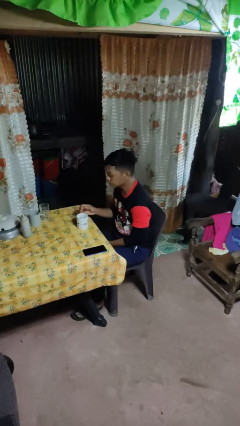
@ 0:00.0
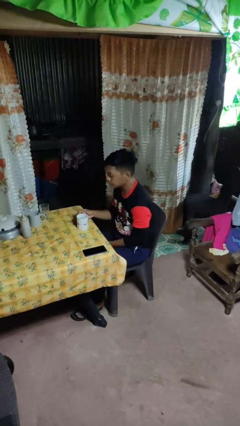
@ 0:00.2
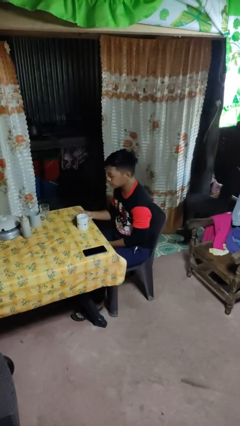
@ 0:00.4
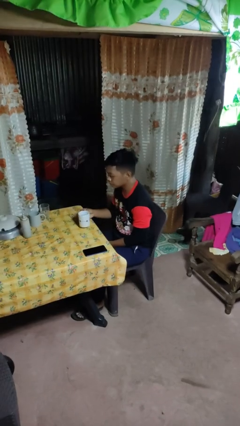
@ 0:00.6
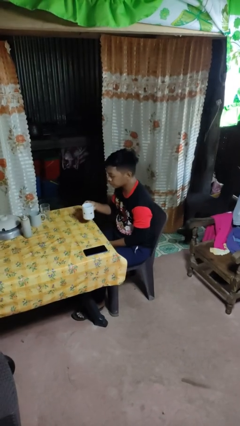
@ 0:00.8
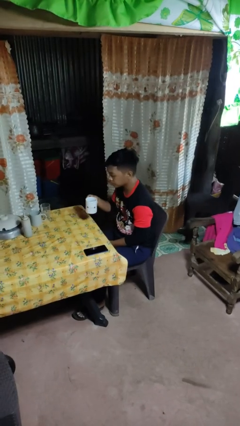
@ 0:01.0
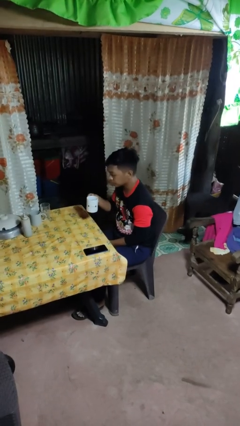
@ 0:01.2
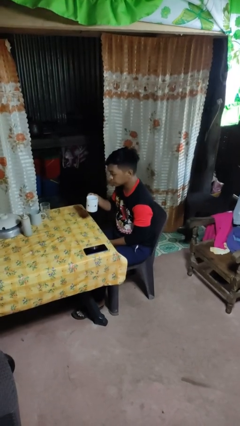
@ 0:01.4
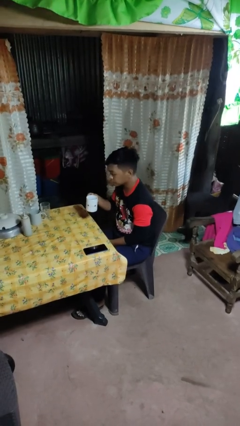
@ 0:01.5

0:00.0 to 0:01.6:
person picks up object from table

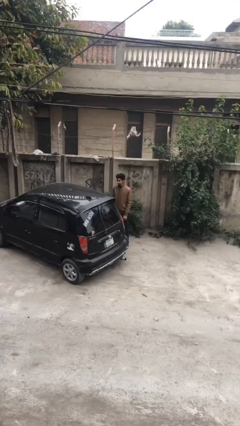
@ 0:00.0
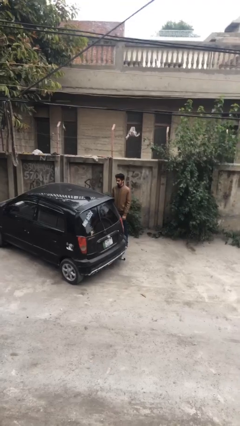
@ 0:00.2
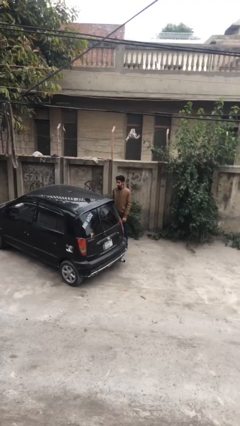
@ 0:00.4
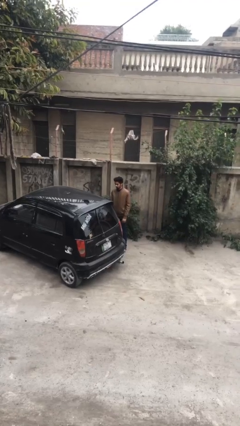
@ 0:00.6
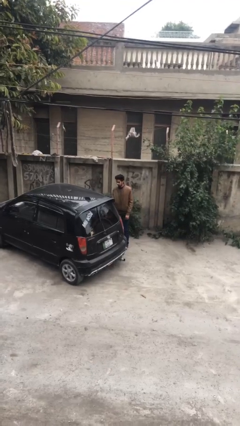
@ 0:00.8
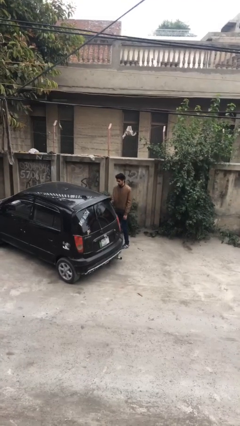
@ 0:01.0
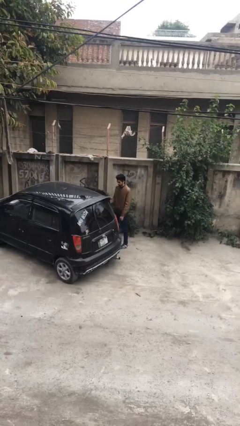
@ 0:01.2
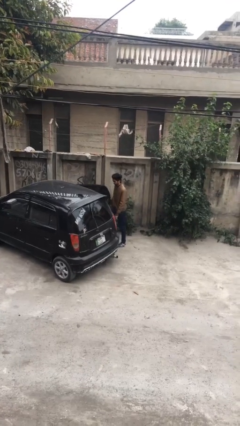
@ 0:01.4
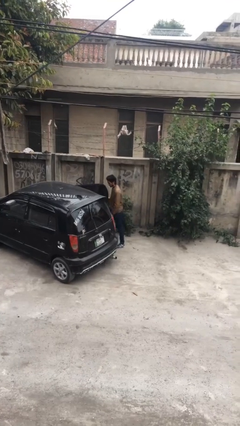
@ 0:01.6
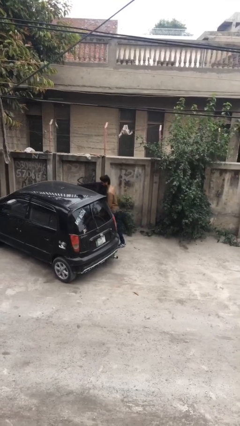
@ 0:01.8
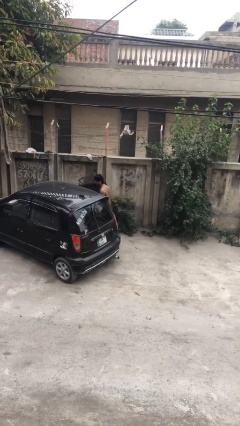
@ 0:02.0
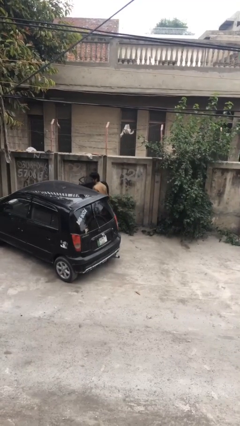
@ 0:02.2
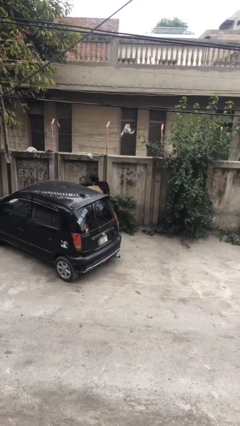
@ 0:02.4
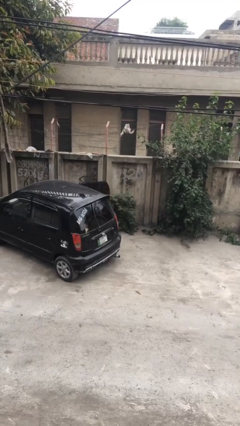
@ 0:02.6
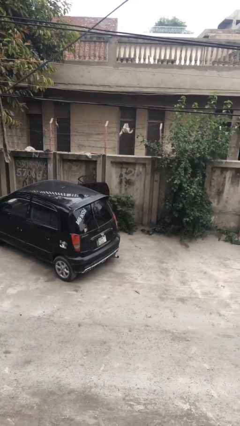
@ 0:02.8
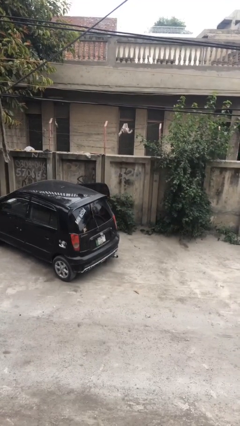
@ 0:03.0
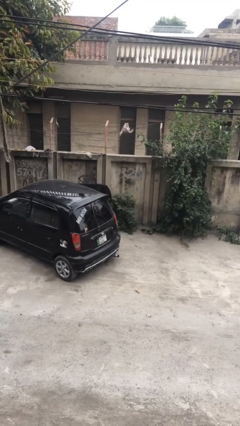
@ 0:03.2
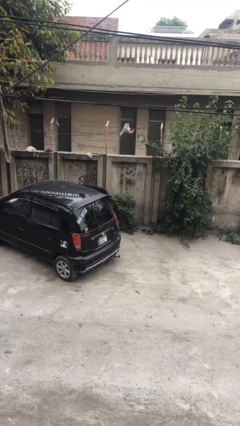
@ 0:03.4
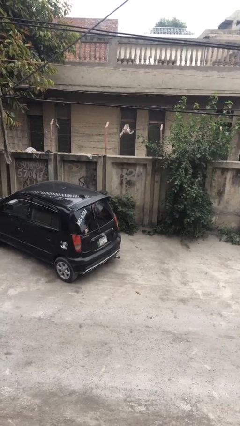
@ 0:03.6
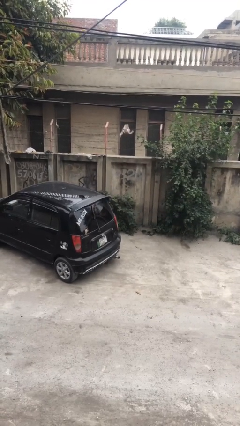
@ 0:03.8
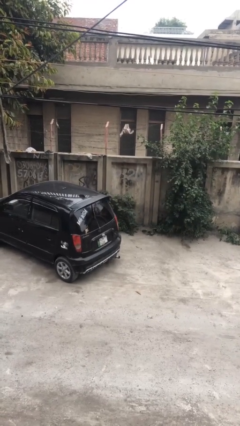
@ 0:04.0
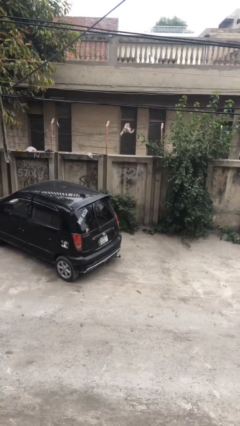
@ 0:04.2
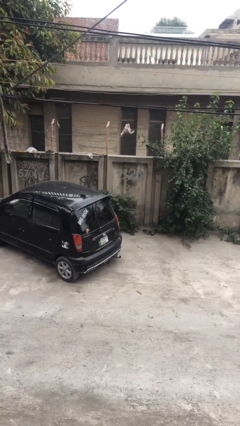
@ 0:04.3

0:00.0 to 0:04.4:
person enters car

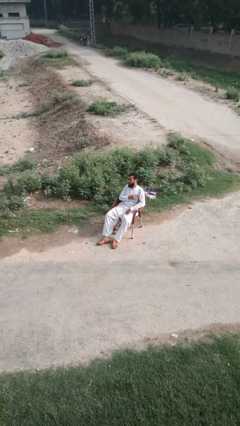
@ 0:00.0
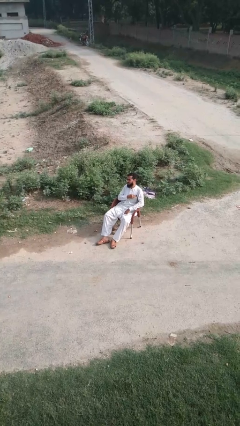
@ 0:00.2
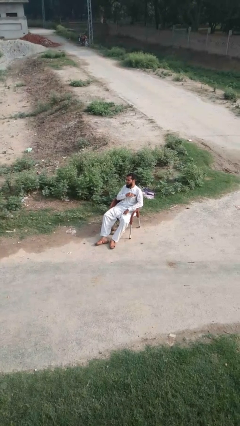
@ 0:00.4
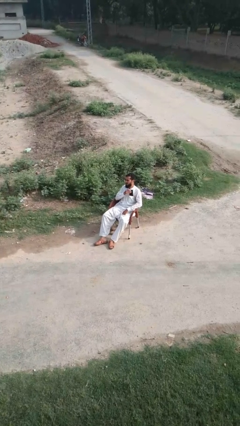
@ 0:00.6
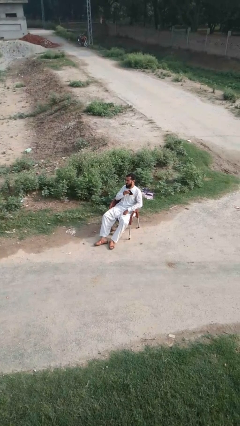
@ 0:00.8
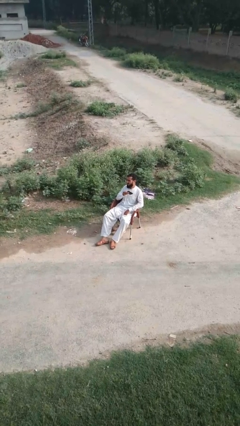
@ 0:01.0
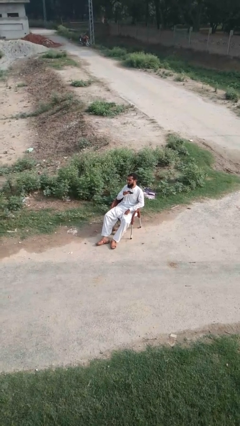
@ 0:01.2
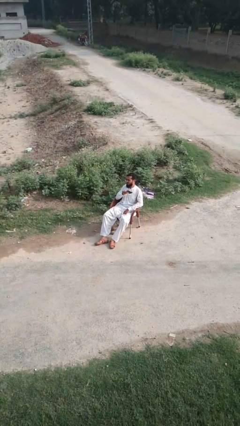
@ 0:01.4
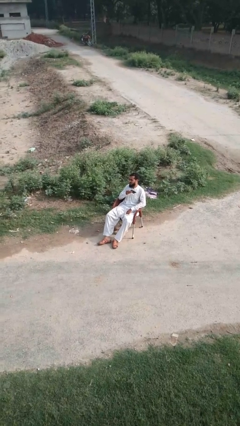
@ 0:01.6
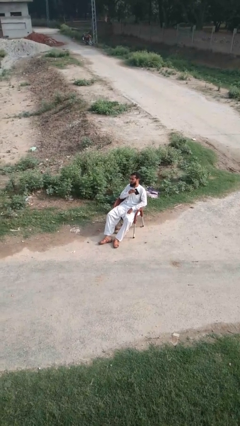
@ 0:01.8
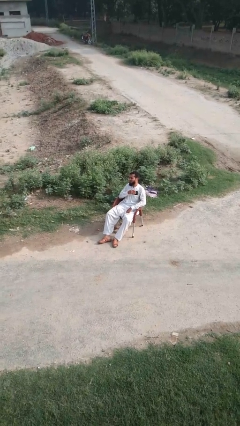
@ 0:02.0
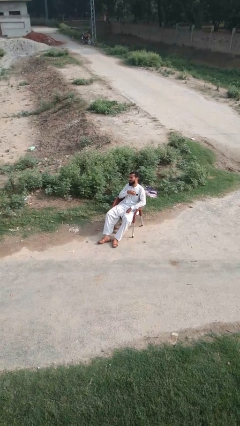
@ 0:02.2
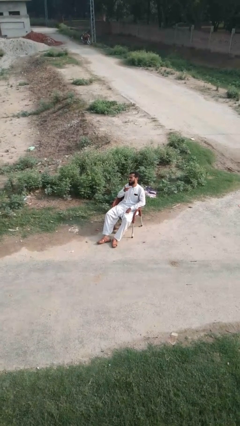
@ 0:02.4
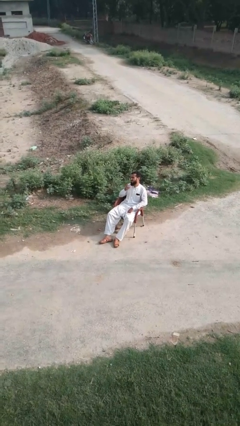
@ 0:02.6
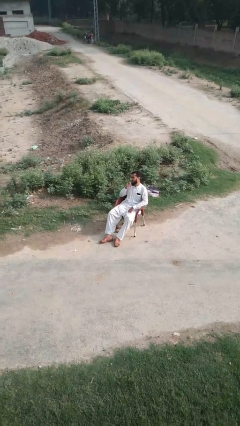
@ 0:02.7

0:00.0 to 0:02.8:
person puts phone into pocket

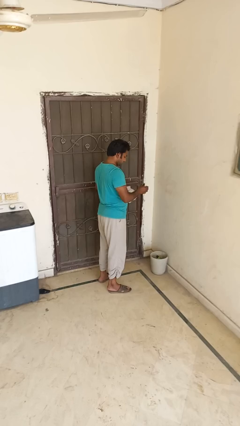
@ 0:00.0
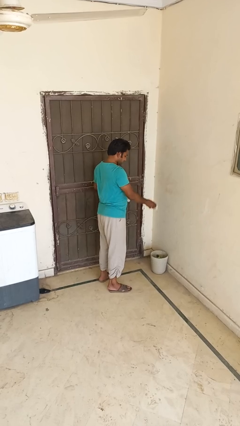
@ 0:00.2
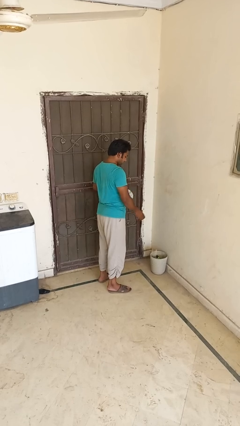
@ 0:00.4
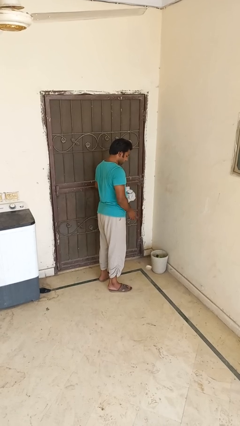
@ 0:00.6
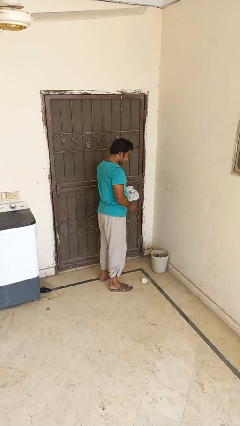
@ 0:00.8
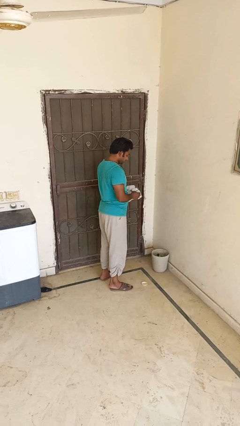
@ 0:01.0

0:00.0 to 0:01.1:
person discards trash

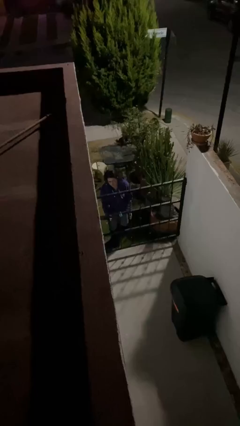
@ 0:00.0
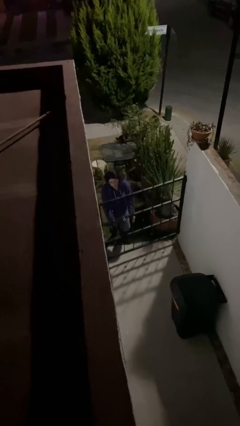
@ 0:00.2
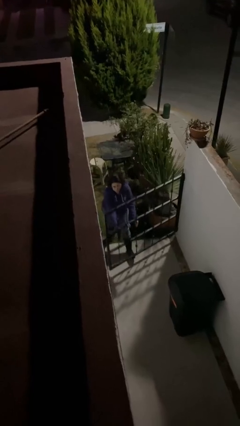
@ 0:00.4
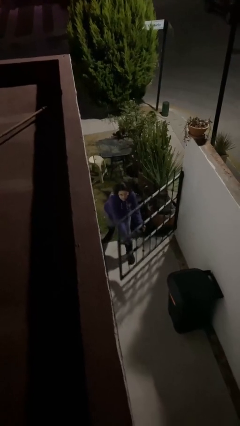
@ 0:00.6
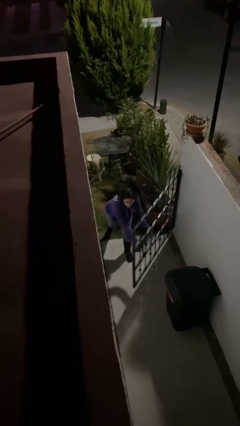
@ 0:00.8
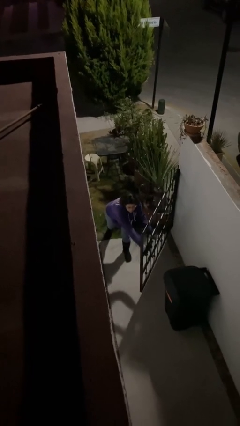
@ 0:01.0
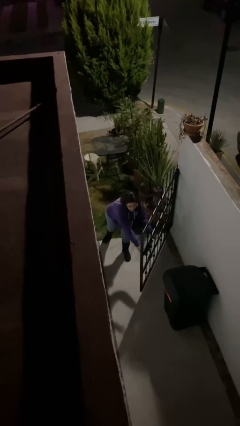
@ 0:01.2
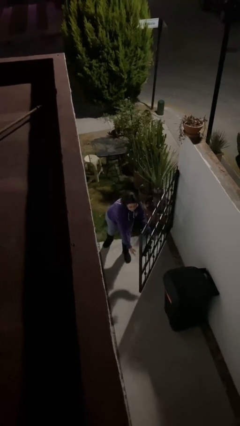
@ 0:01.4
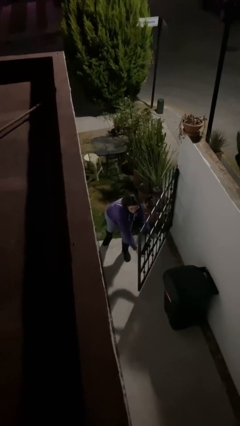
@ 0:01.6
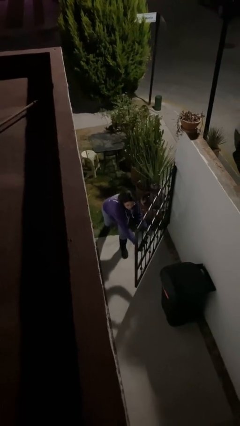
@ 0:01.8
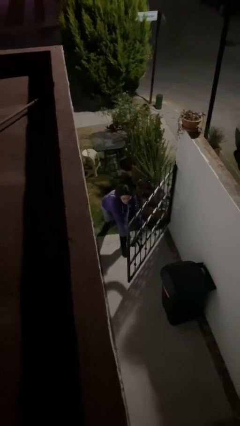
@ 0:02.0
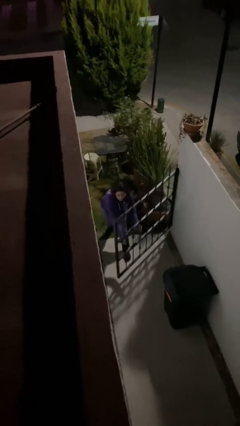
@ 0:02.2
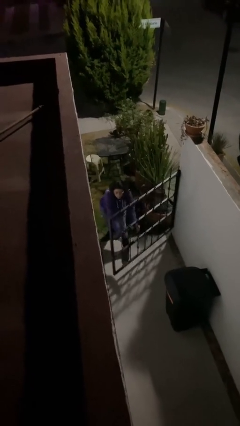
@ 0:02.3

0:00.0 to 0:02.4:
person opens facility door

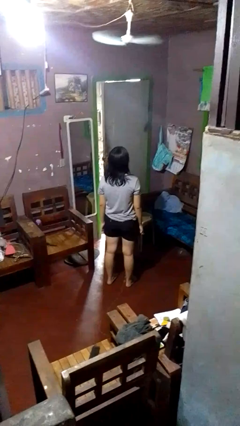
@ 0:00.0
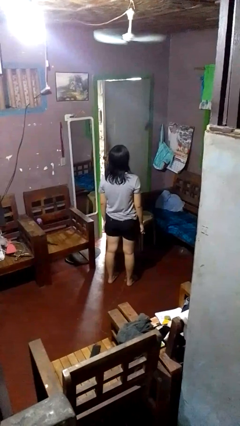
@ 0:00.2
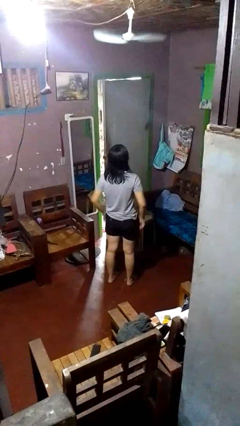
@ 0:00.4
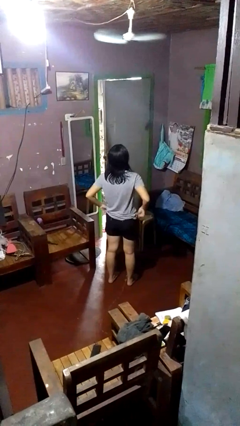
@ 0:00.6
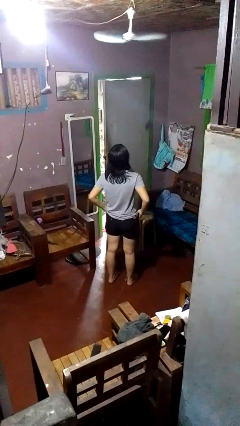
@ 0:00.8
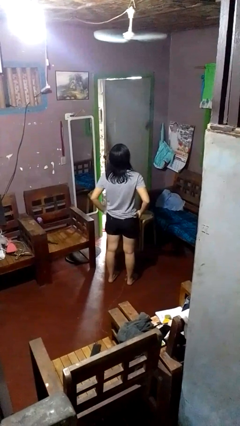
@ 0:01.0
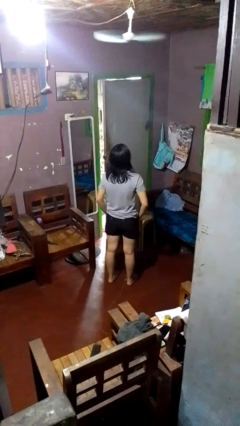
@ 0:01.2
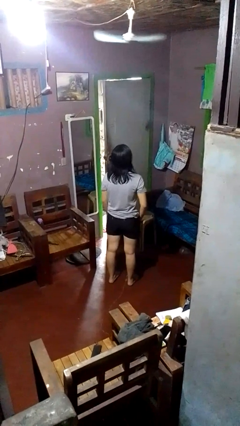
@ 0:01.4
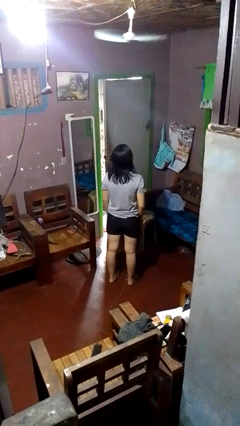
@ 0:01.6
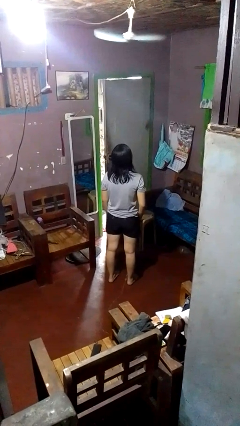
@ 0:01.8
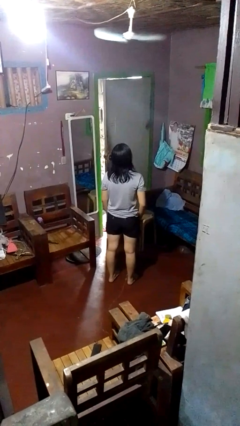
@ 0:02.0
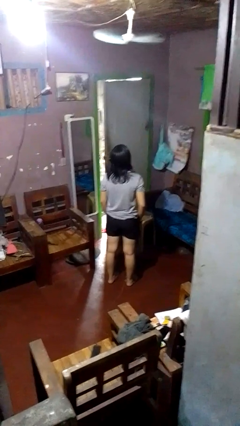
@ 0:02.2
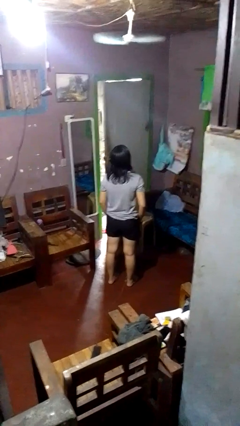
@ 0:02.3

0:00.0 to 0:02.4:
person puts hands in back pockets

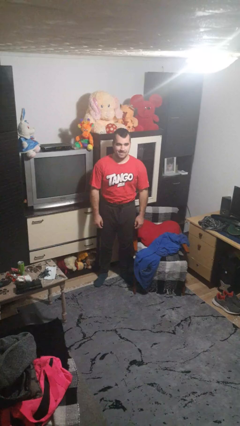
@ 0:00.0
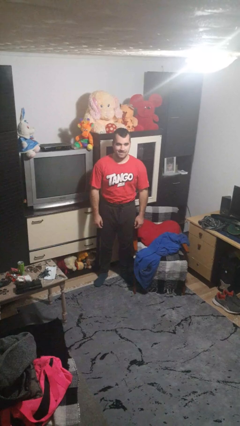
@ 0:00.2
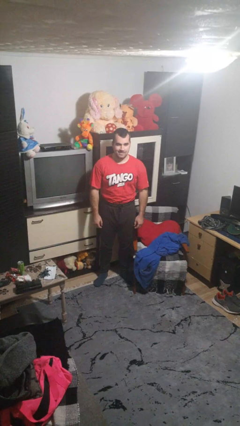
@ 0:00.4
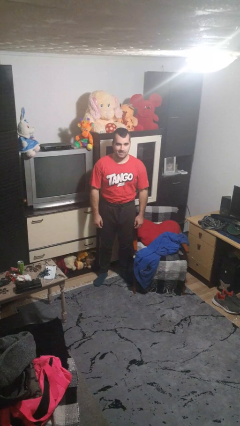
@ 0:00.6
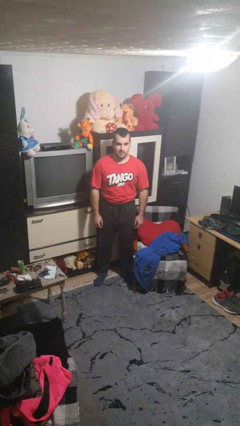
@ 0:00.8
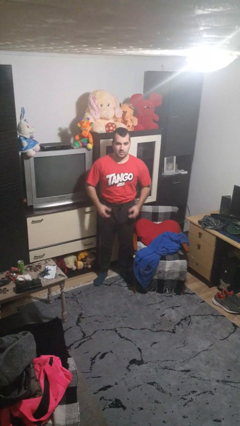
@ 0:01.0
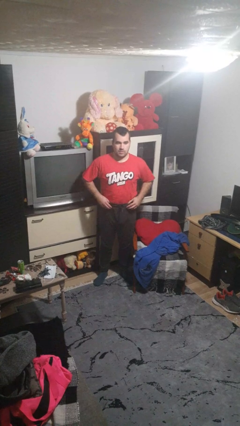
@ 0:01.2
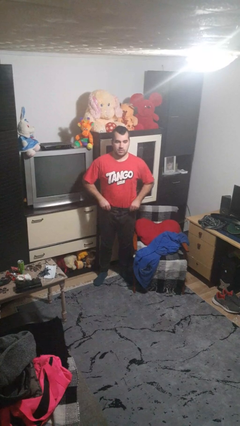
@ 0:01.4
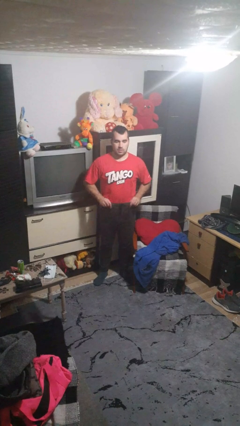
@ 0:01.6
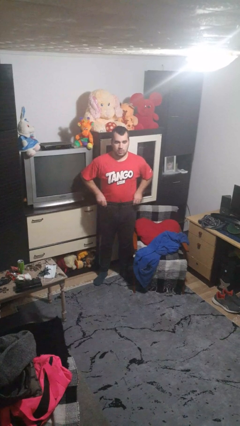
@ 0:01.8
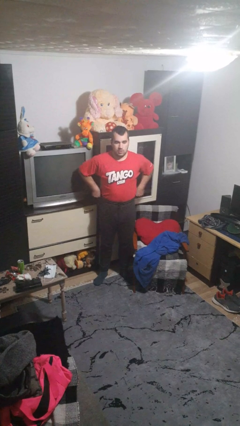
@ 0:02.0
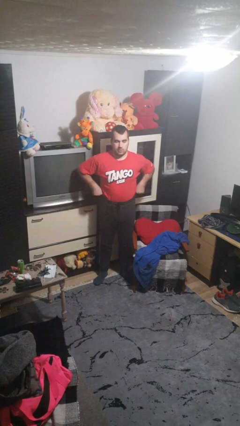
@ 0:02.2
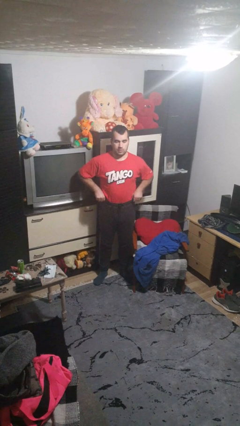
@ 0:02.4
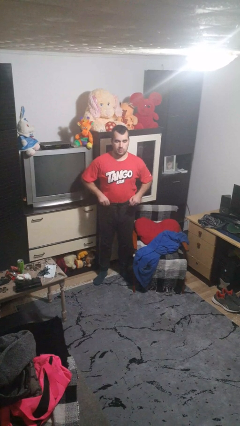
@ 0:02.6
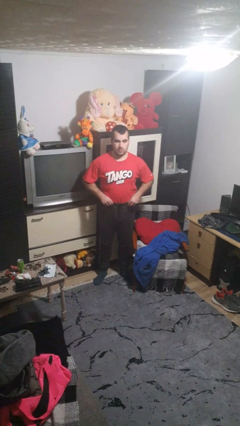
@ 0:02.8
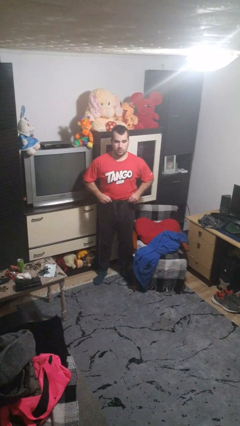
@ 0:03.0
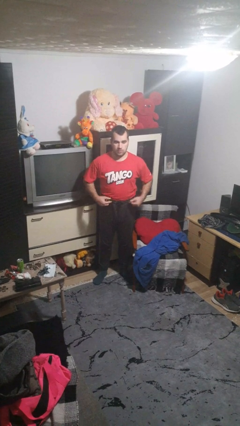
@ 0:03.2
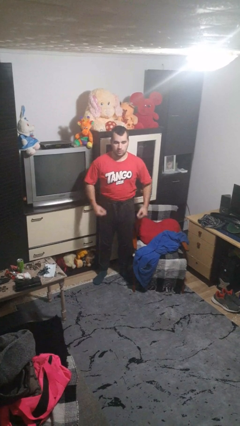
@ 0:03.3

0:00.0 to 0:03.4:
person hikes up pants
